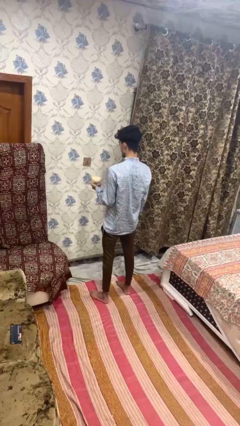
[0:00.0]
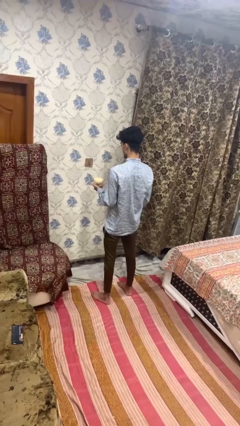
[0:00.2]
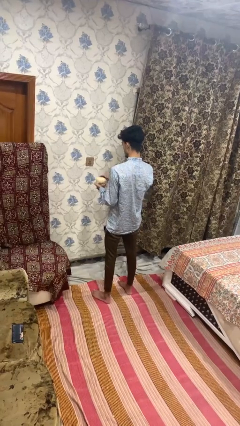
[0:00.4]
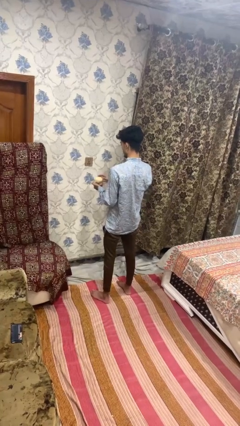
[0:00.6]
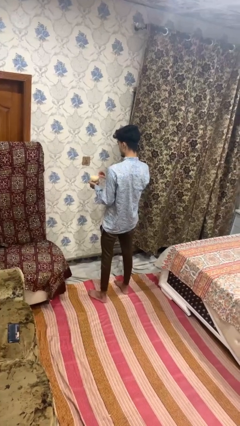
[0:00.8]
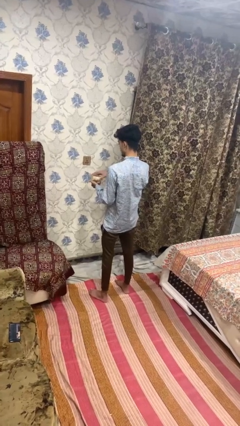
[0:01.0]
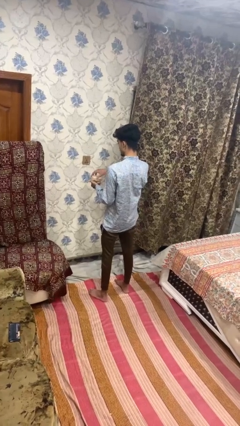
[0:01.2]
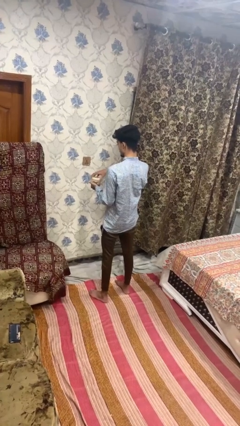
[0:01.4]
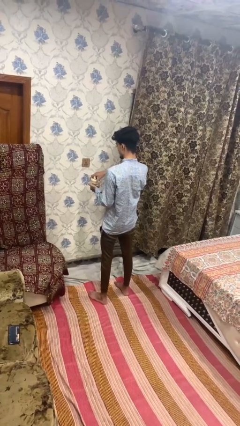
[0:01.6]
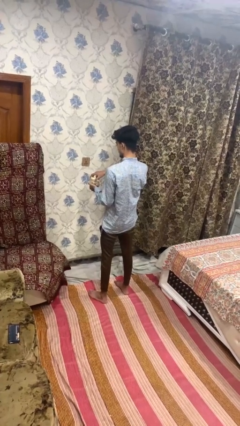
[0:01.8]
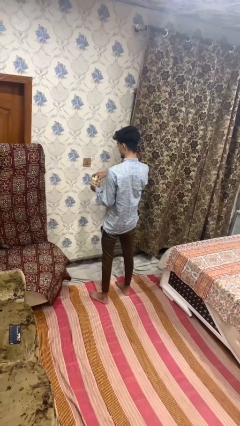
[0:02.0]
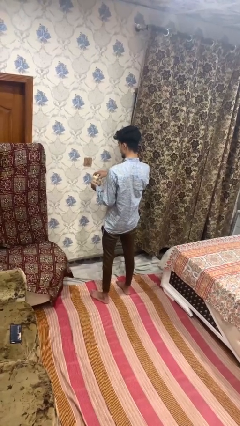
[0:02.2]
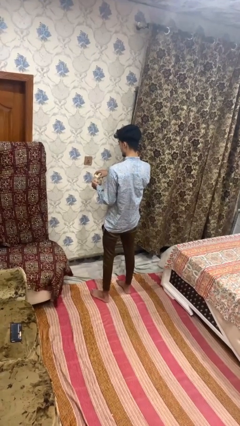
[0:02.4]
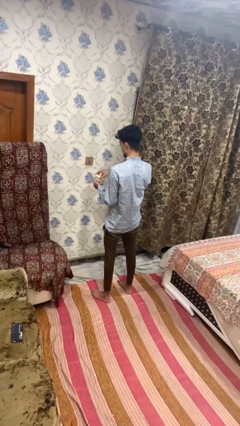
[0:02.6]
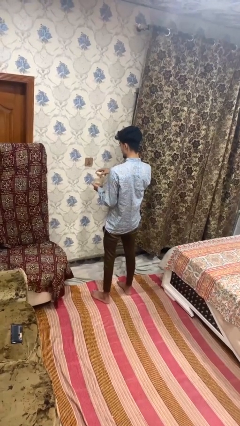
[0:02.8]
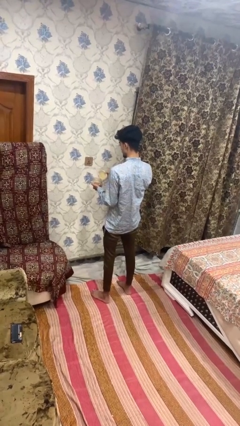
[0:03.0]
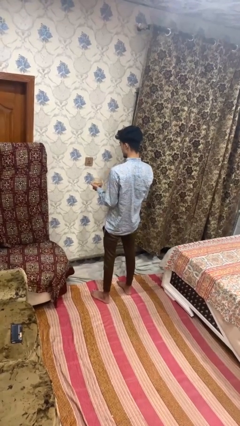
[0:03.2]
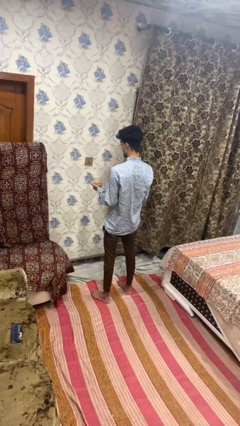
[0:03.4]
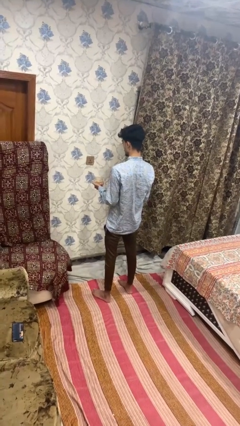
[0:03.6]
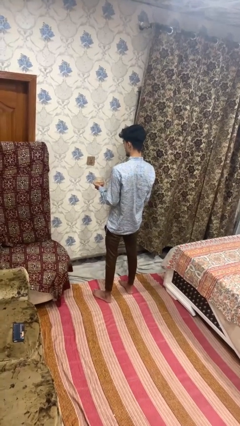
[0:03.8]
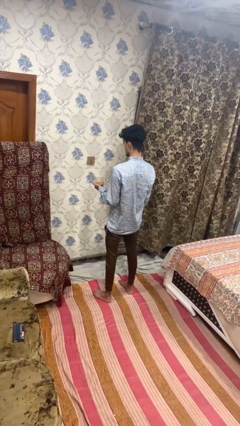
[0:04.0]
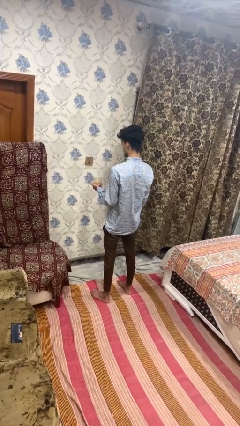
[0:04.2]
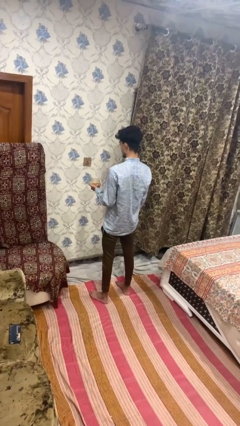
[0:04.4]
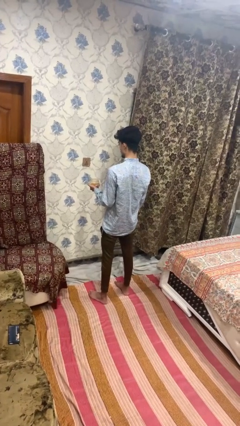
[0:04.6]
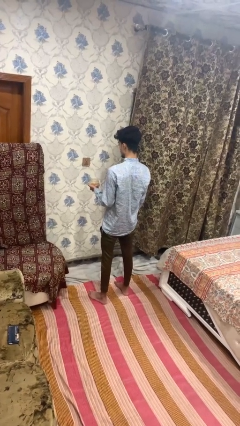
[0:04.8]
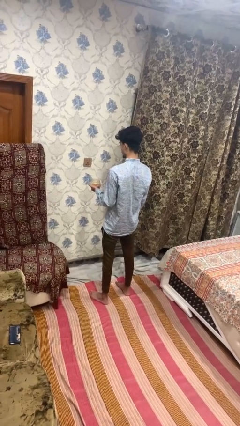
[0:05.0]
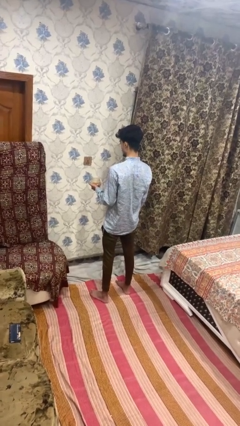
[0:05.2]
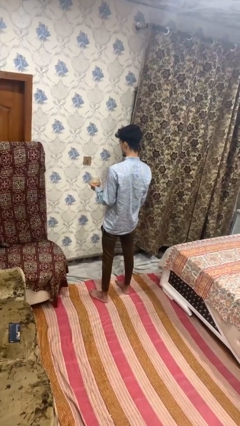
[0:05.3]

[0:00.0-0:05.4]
person opens jar

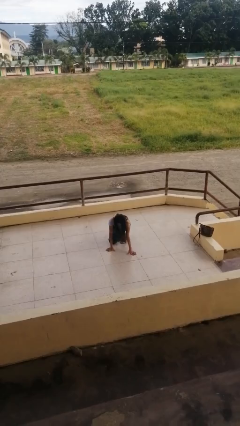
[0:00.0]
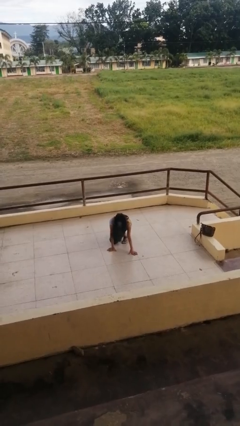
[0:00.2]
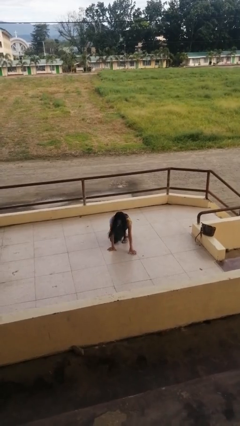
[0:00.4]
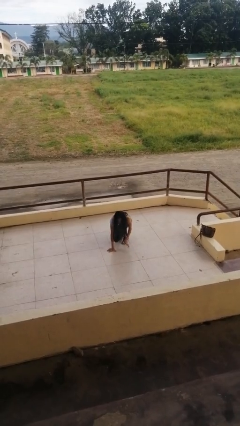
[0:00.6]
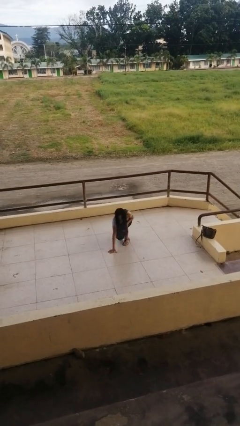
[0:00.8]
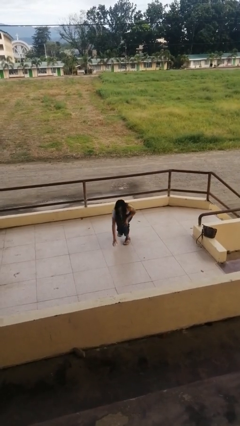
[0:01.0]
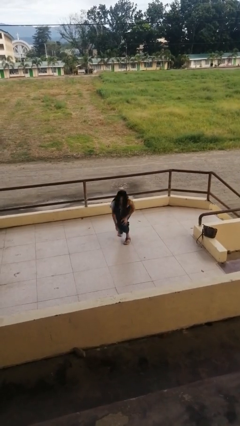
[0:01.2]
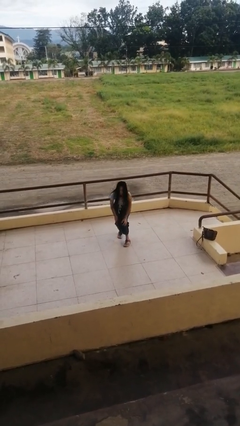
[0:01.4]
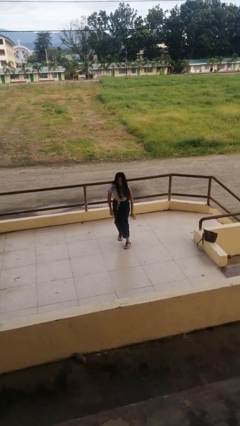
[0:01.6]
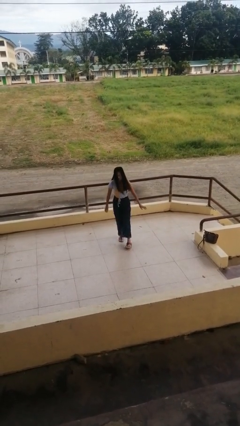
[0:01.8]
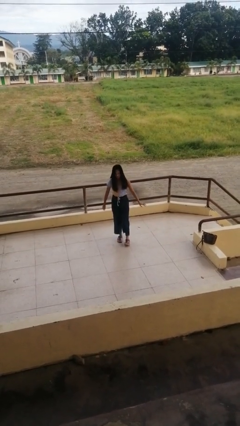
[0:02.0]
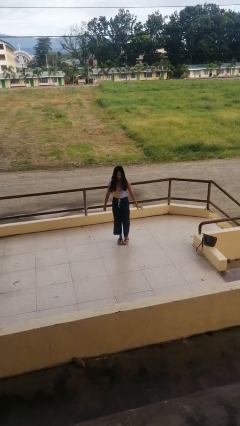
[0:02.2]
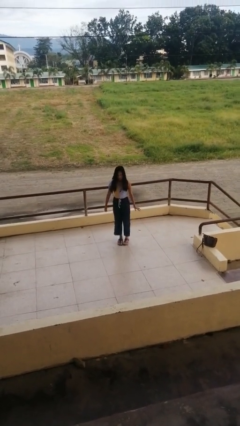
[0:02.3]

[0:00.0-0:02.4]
person stands up from floor

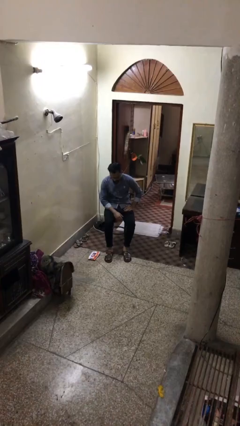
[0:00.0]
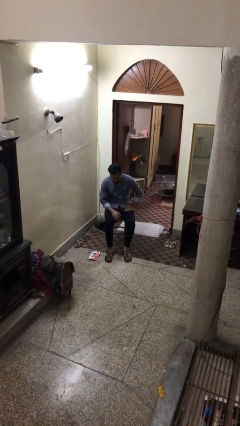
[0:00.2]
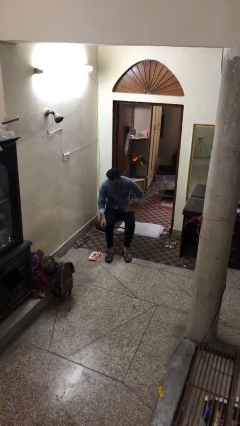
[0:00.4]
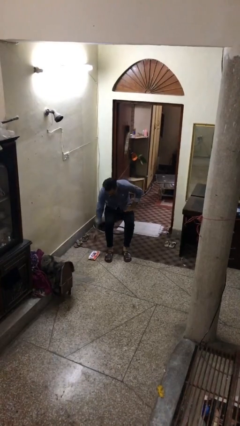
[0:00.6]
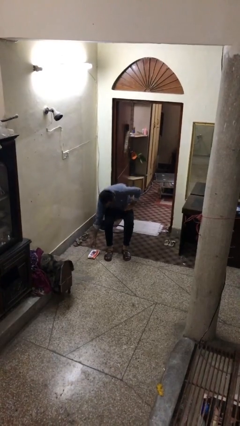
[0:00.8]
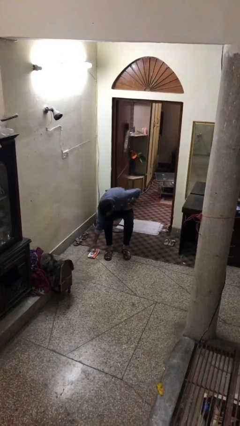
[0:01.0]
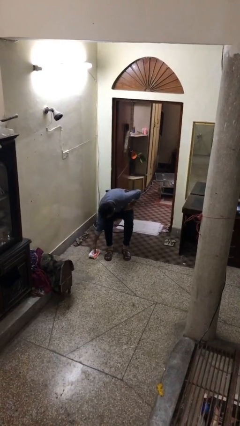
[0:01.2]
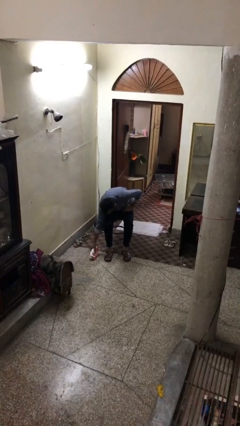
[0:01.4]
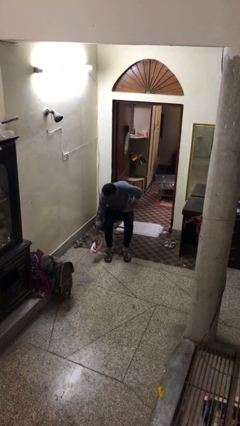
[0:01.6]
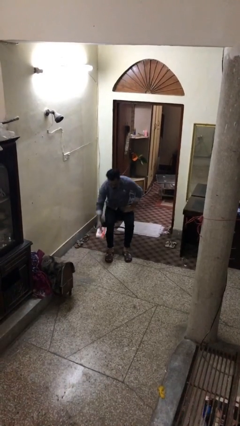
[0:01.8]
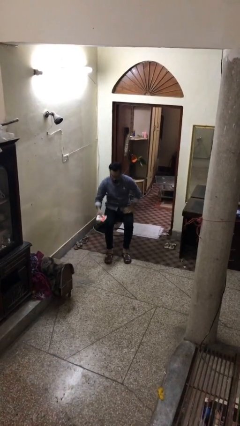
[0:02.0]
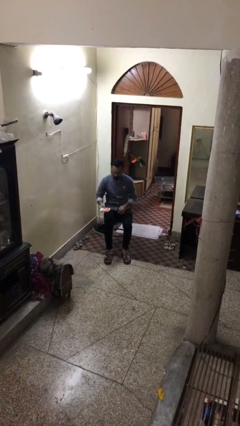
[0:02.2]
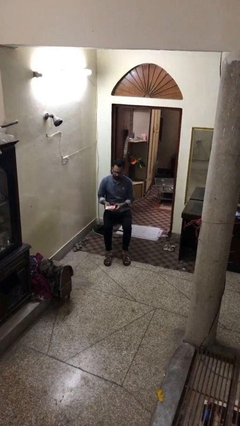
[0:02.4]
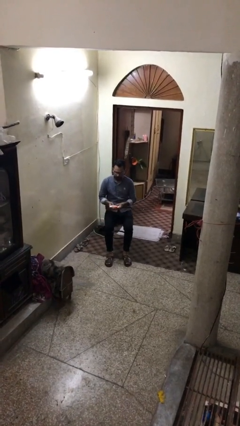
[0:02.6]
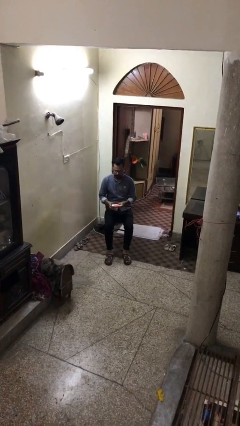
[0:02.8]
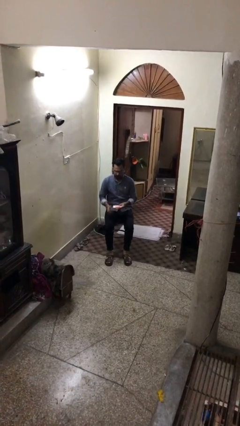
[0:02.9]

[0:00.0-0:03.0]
person picks up object from floor

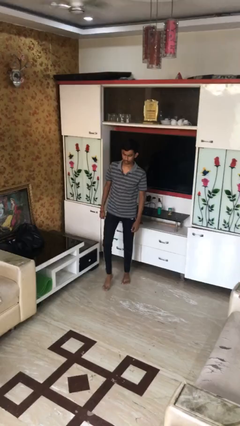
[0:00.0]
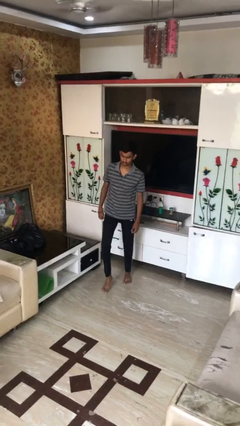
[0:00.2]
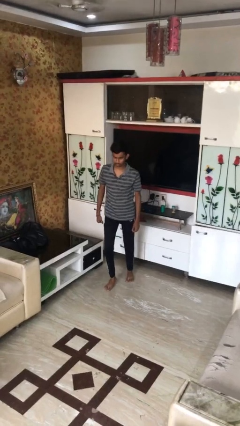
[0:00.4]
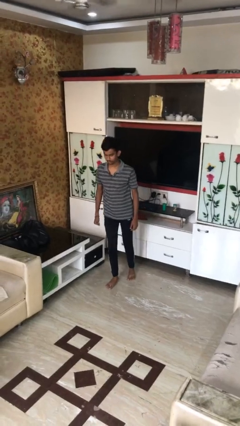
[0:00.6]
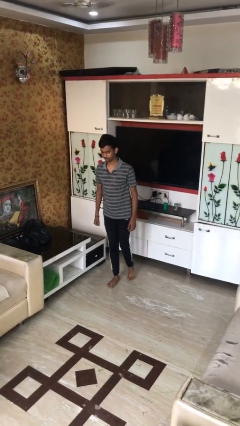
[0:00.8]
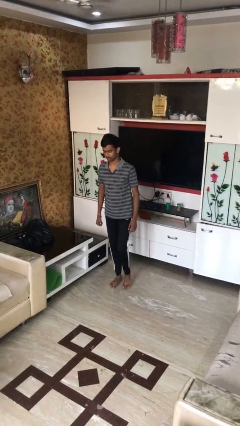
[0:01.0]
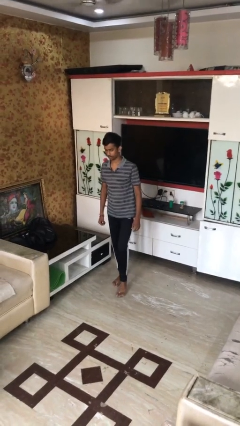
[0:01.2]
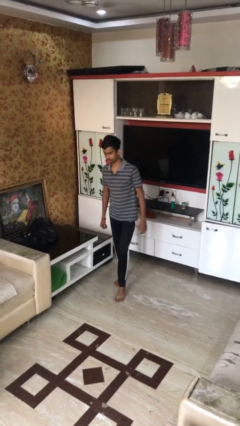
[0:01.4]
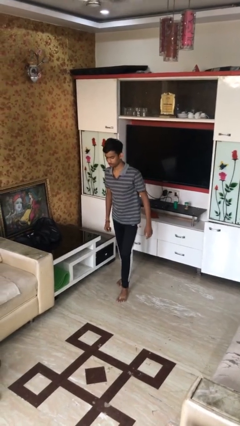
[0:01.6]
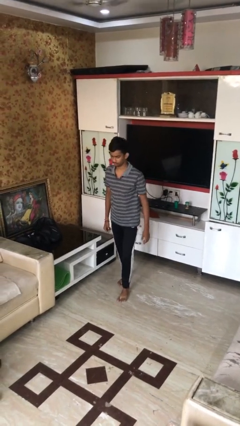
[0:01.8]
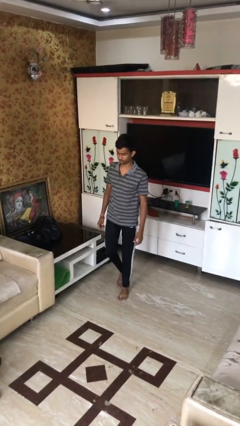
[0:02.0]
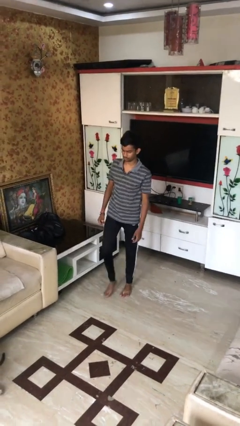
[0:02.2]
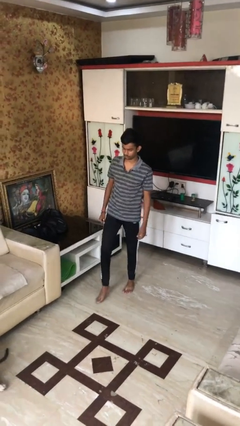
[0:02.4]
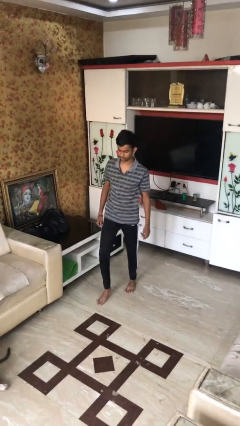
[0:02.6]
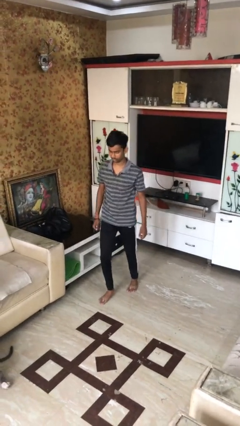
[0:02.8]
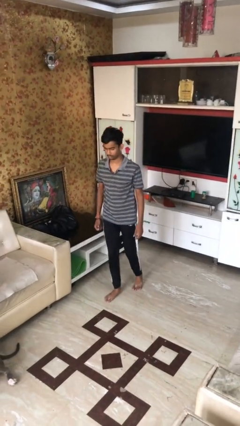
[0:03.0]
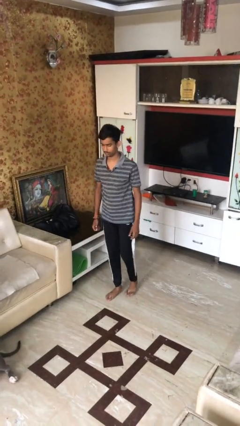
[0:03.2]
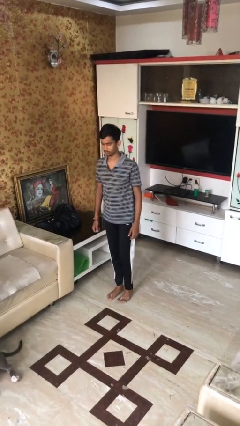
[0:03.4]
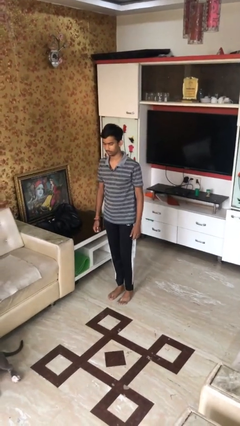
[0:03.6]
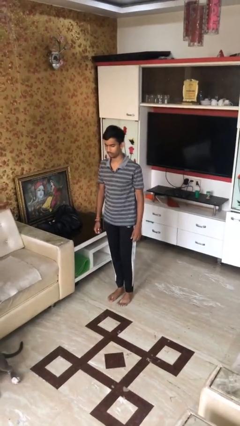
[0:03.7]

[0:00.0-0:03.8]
person walks tiptoe

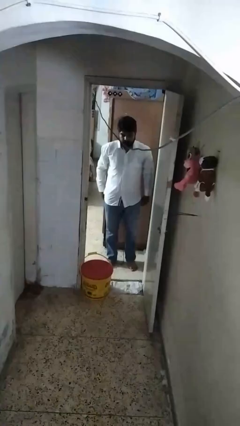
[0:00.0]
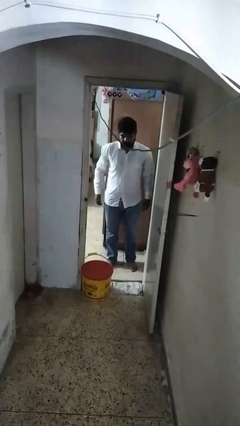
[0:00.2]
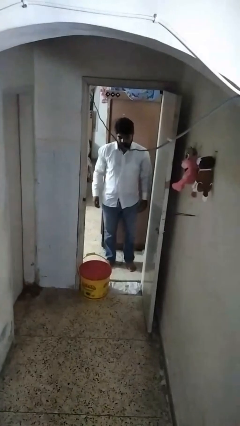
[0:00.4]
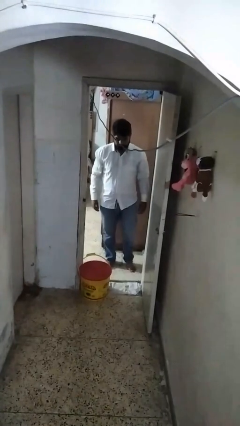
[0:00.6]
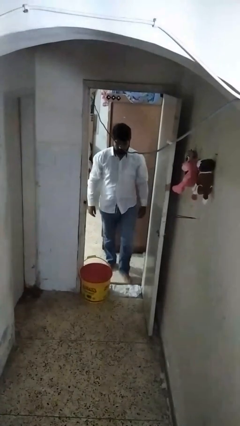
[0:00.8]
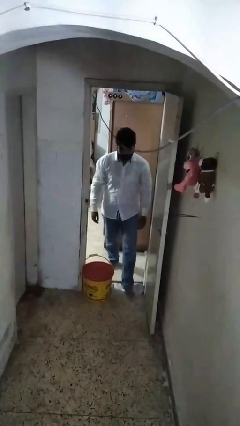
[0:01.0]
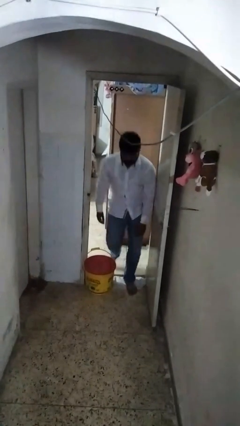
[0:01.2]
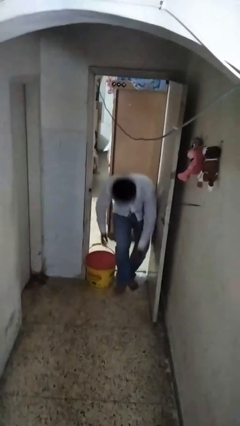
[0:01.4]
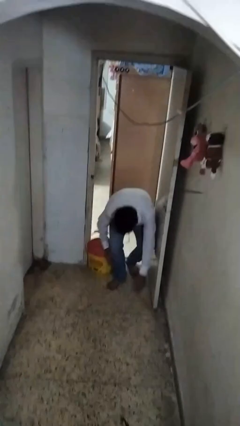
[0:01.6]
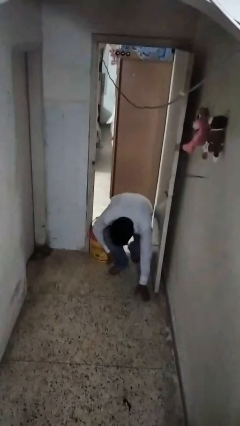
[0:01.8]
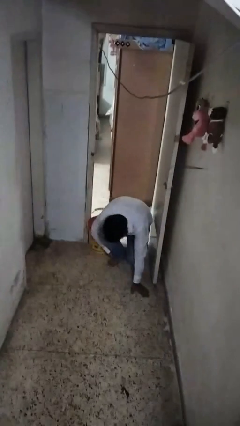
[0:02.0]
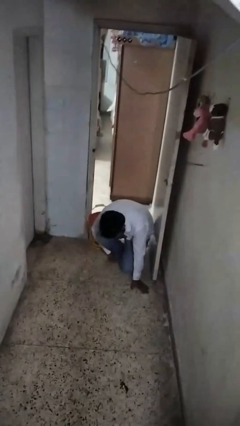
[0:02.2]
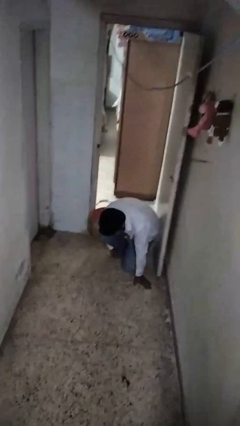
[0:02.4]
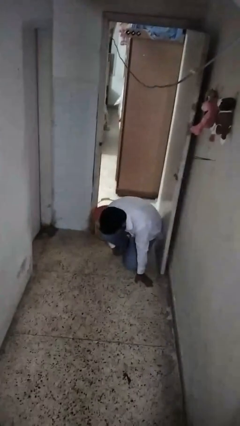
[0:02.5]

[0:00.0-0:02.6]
person trips on object on floor

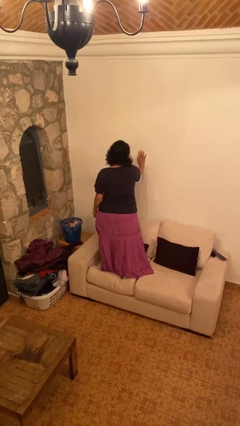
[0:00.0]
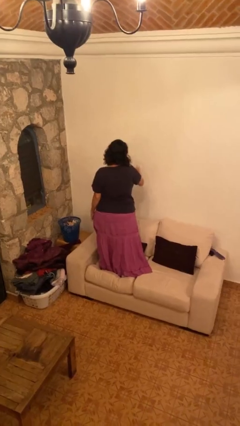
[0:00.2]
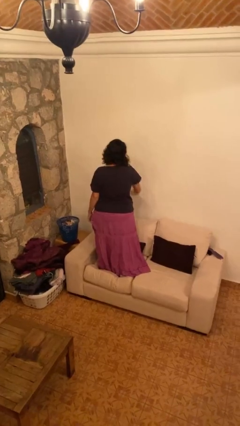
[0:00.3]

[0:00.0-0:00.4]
person climbs off couch
